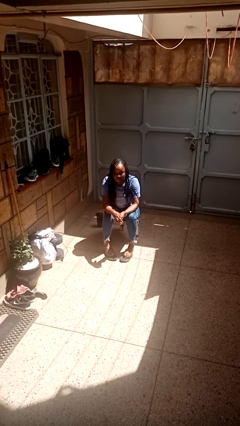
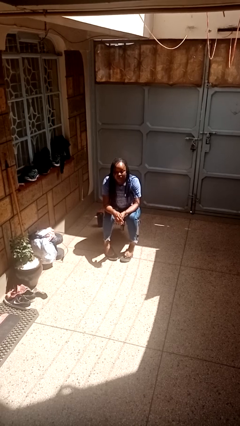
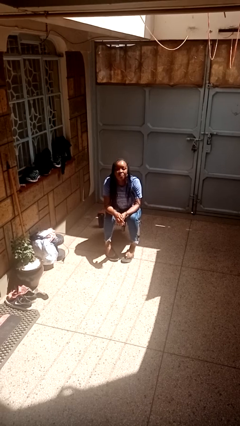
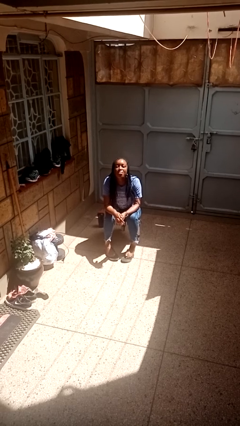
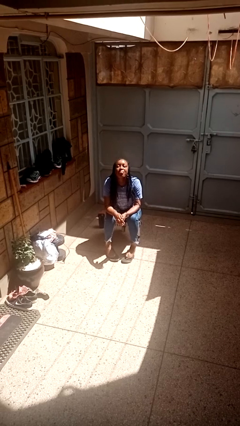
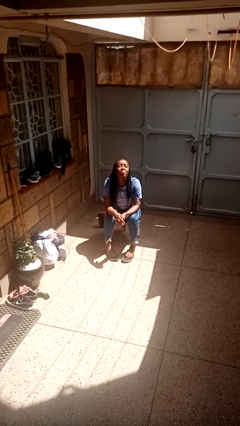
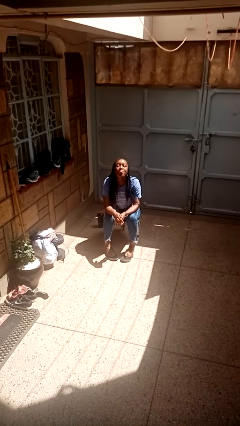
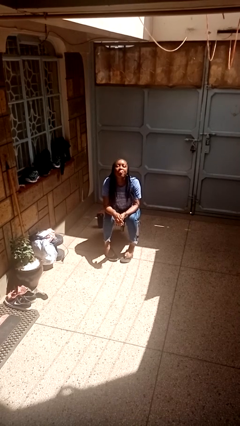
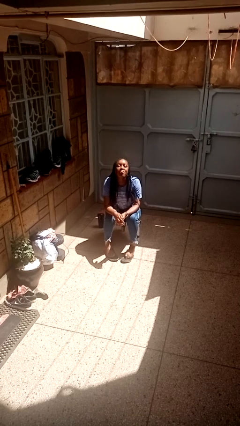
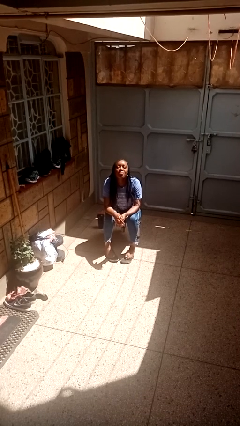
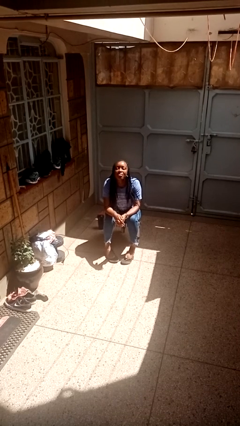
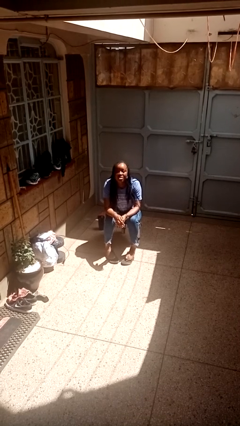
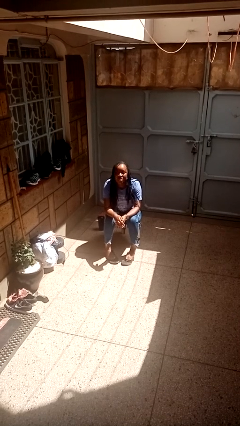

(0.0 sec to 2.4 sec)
person sticks out tongue

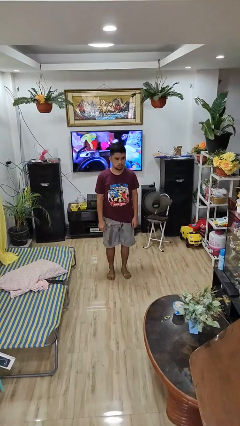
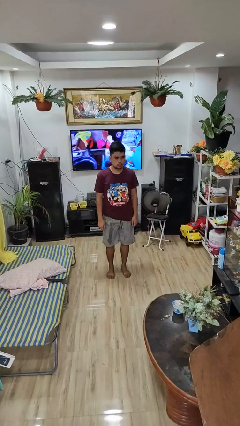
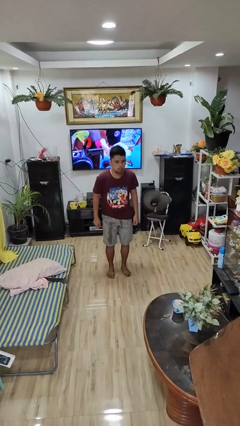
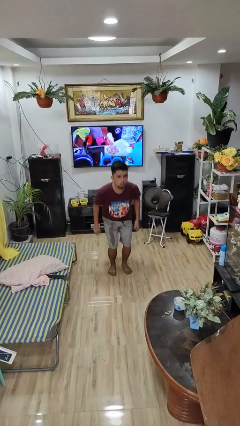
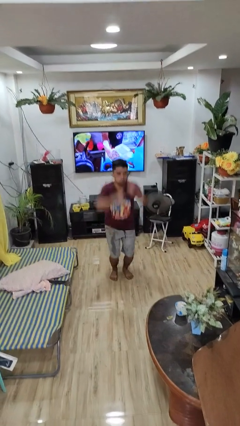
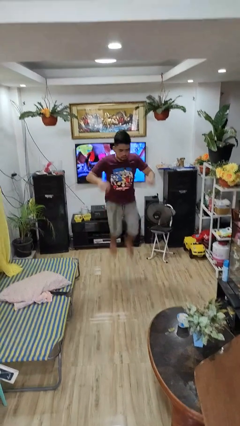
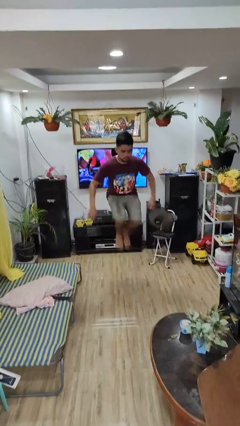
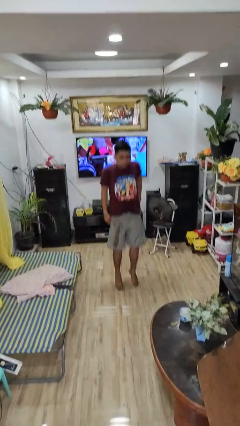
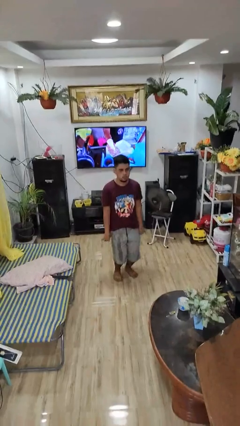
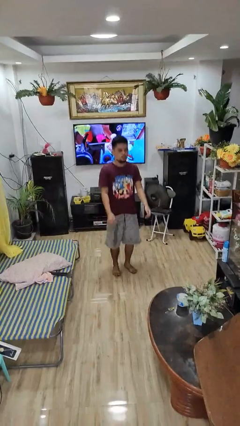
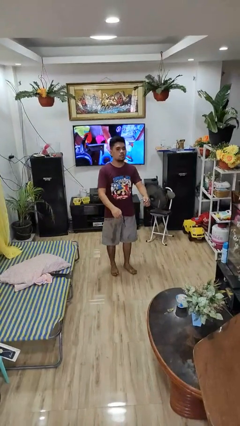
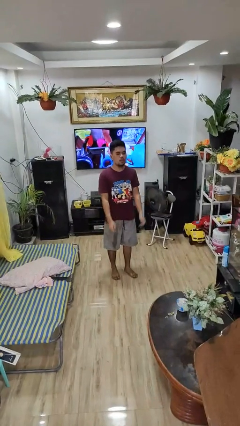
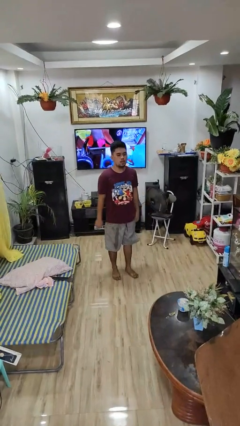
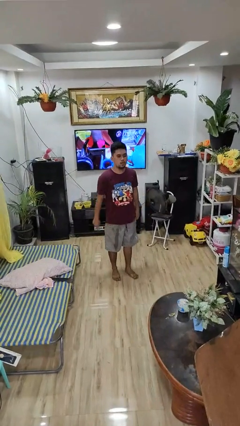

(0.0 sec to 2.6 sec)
person jumps

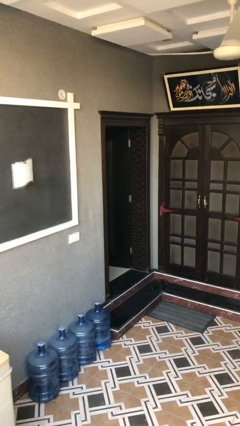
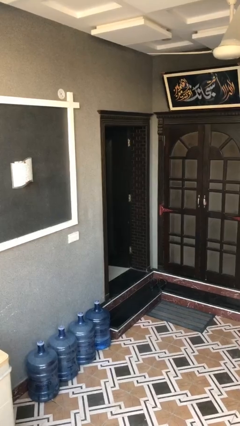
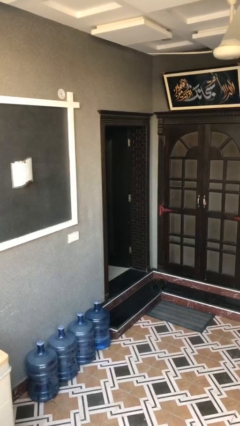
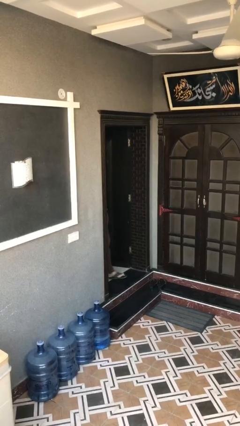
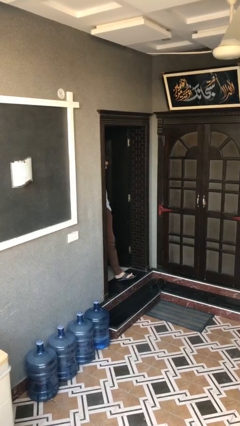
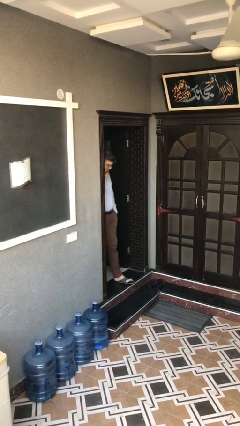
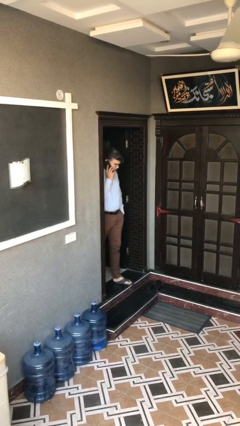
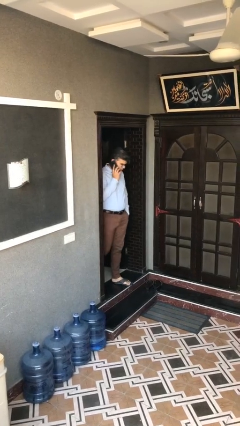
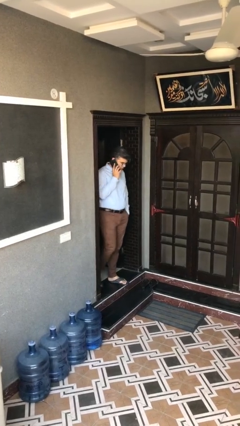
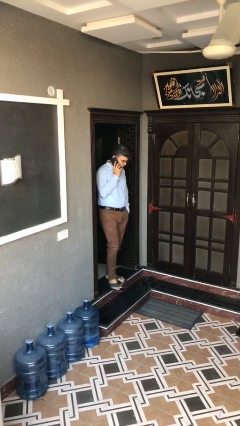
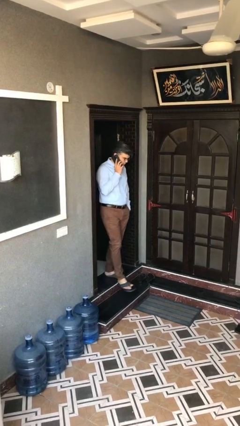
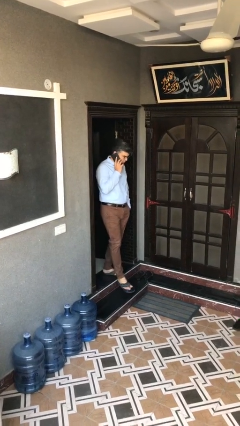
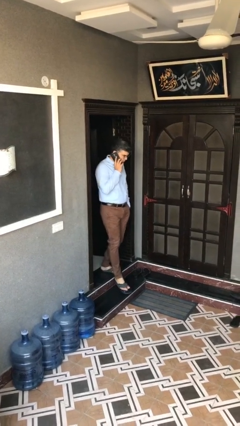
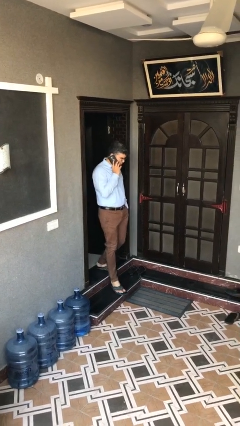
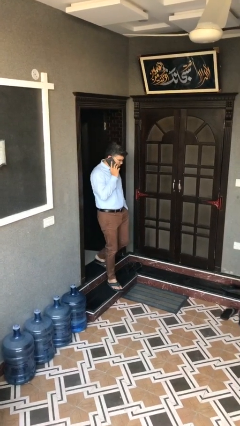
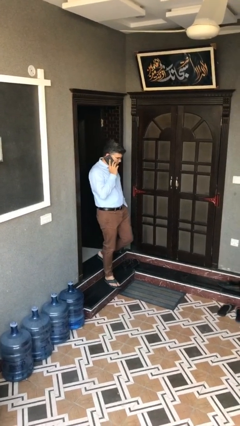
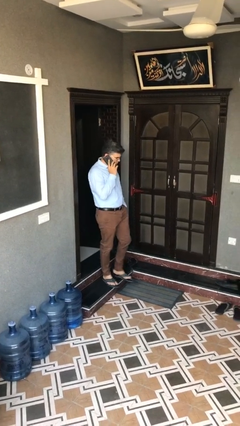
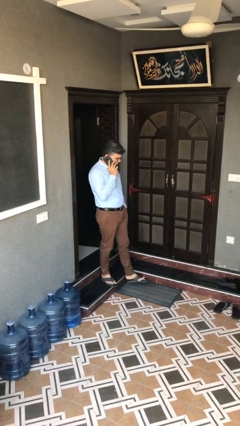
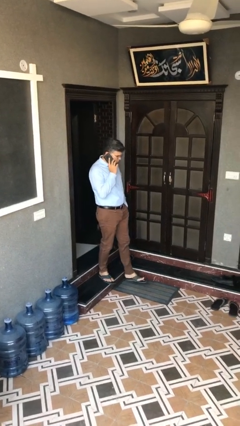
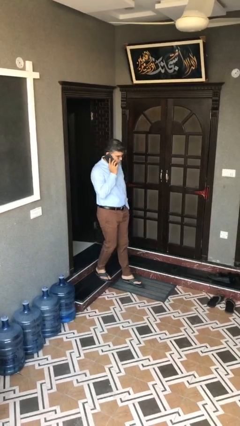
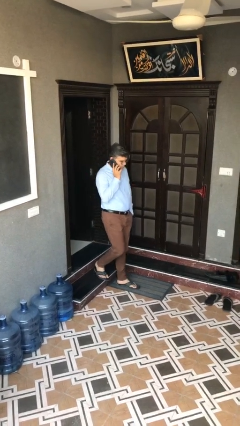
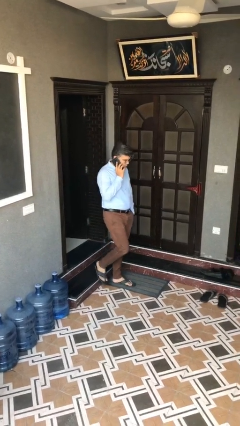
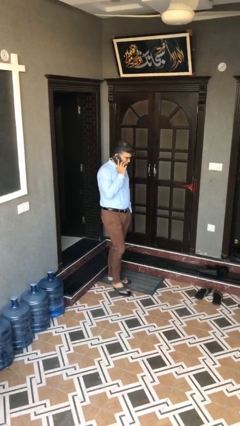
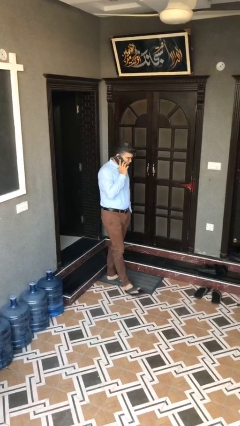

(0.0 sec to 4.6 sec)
person enters scene through structure

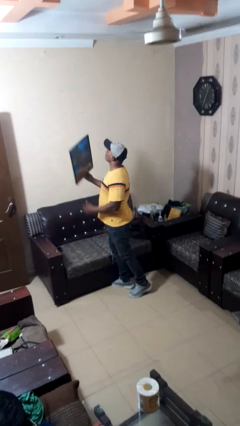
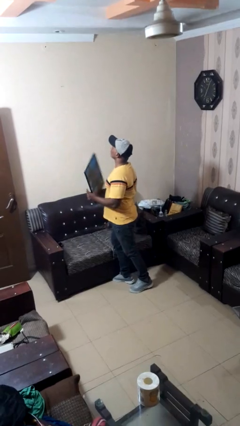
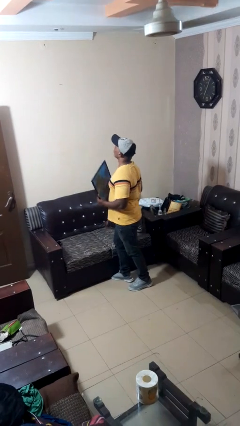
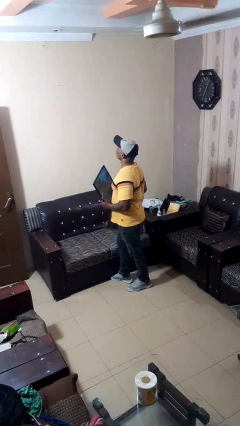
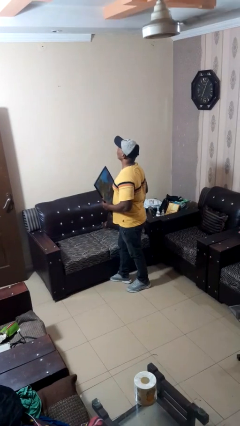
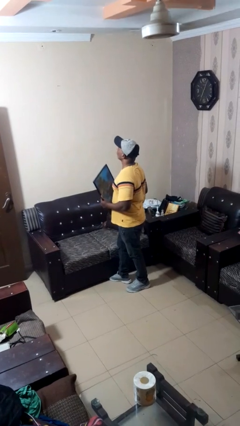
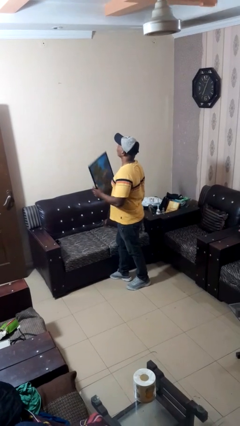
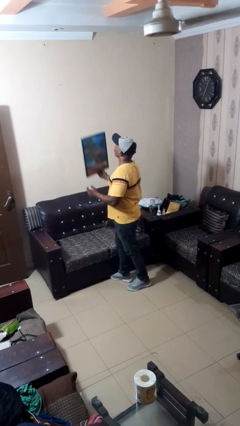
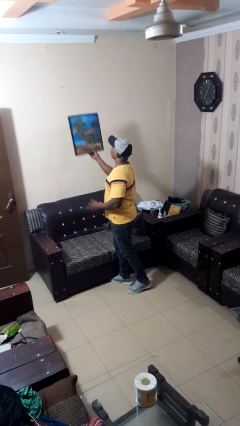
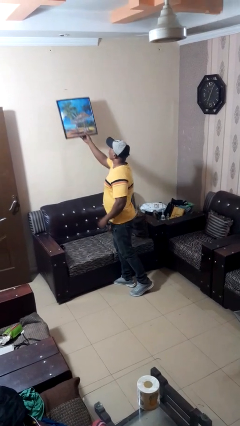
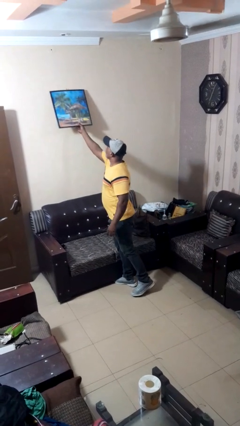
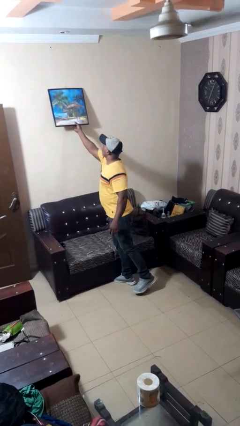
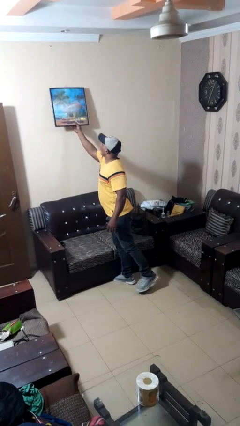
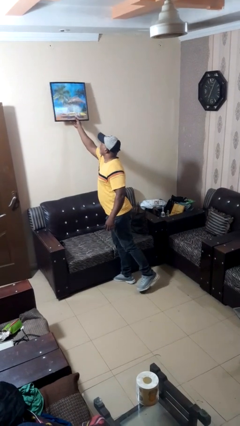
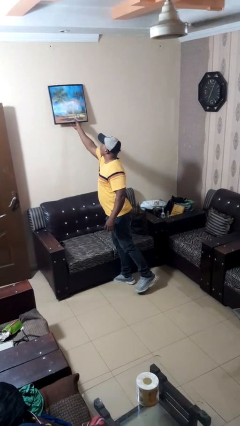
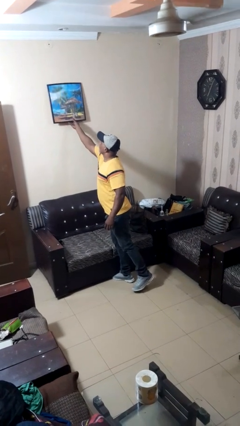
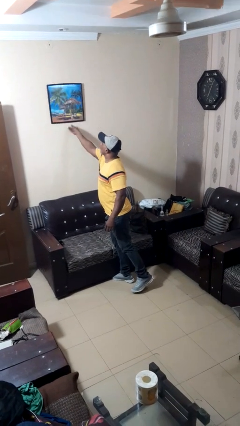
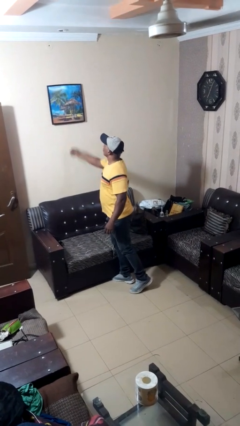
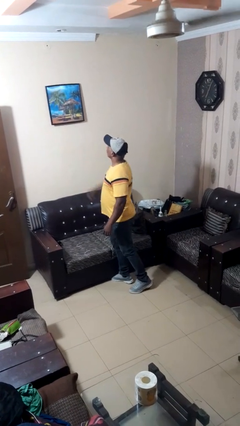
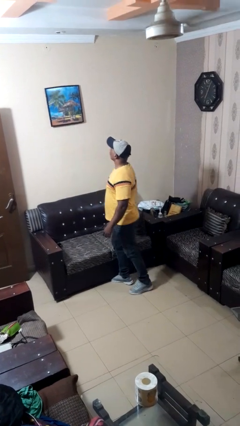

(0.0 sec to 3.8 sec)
person puts up picture frame

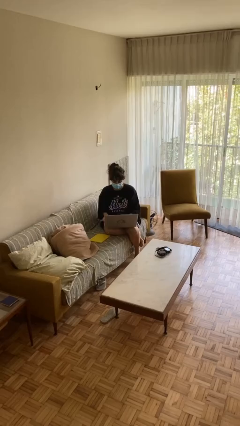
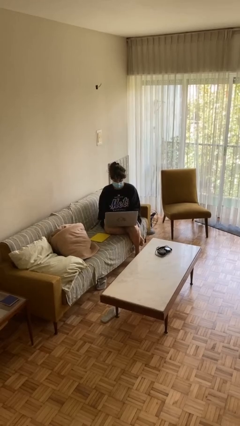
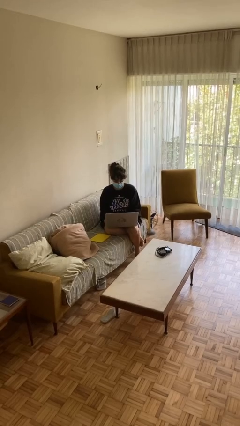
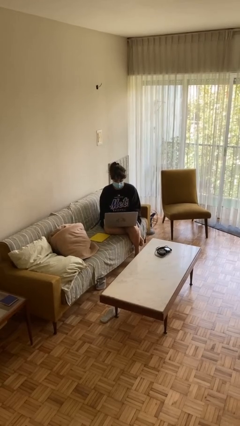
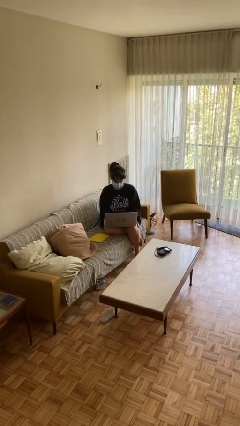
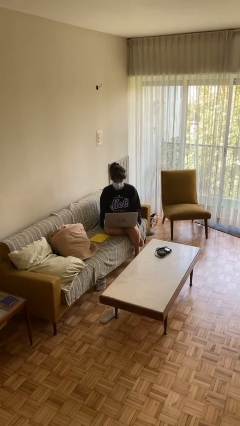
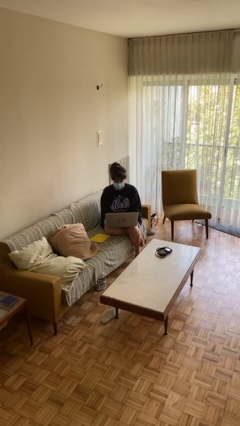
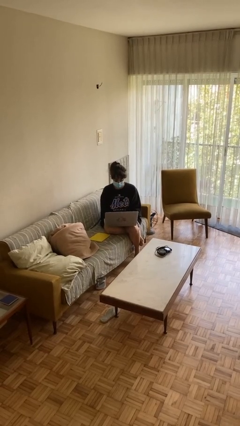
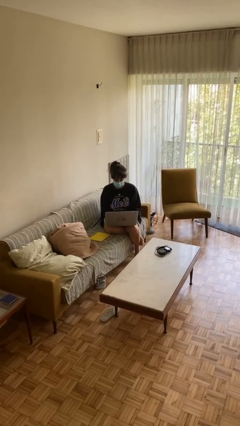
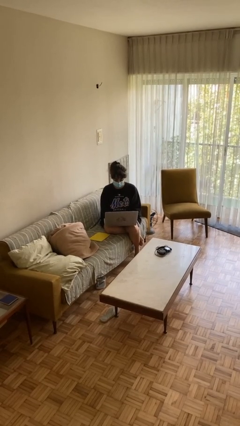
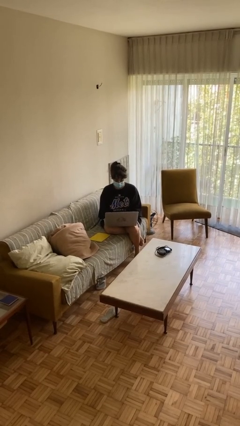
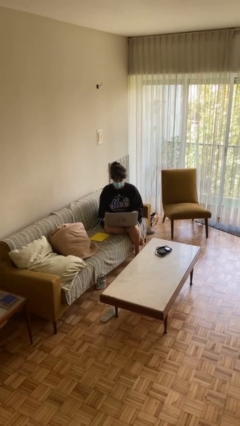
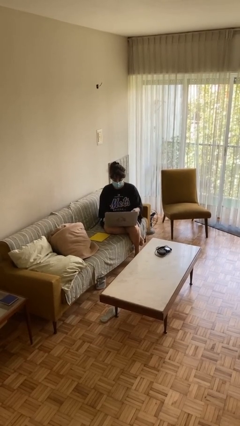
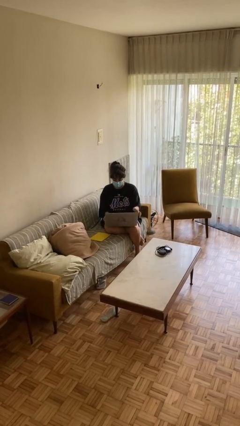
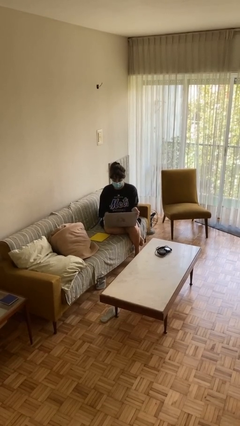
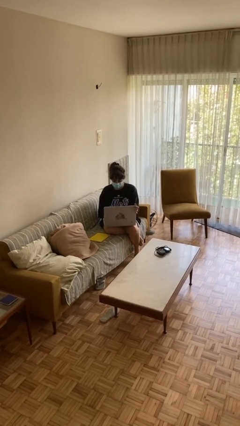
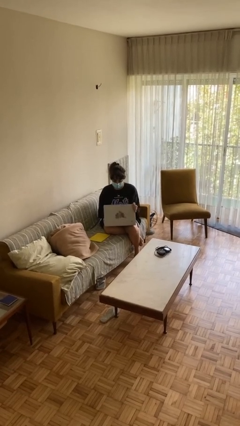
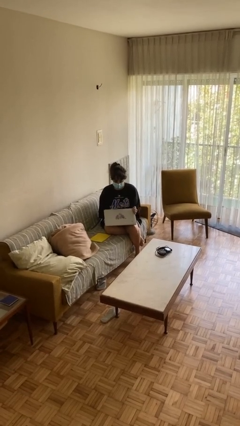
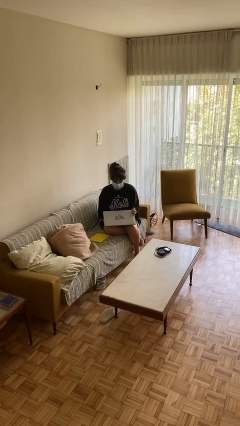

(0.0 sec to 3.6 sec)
person interacts with laptop

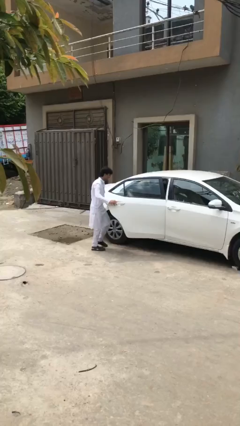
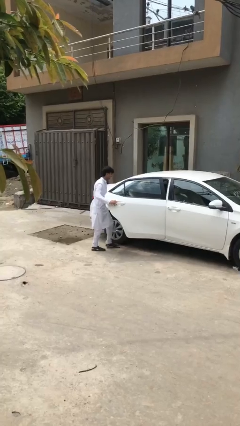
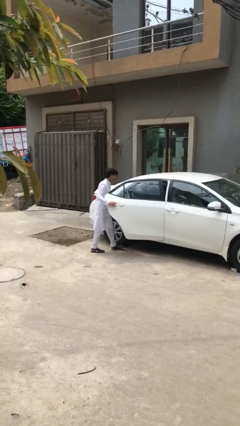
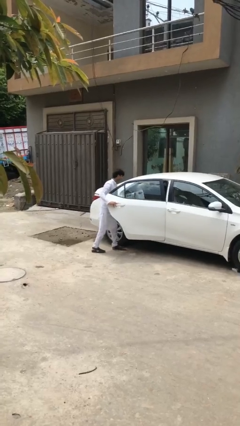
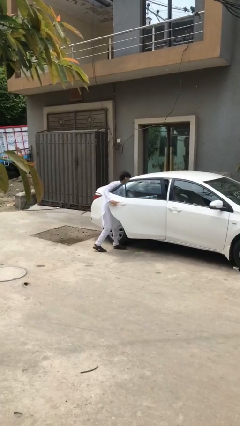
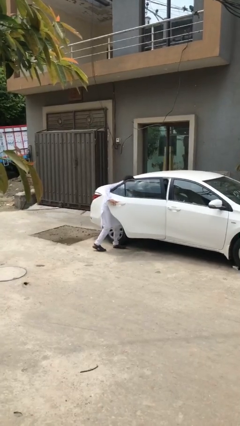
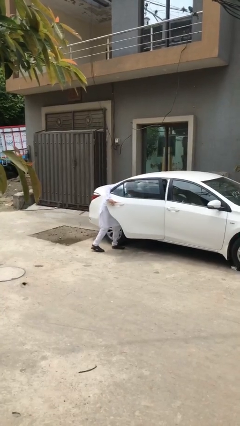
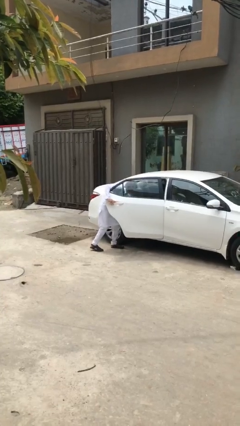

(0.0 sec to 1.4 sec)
person loads car
